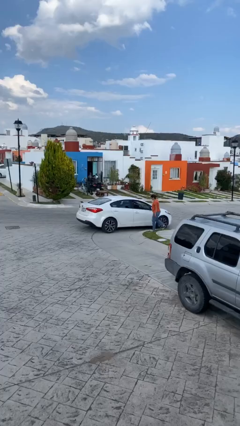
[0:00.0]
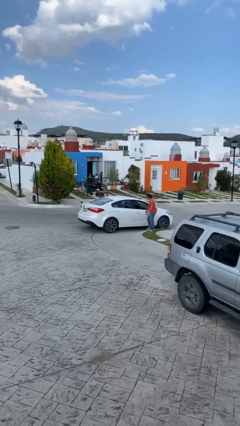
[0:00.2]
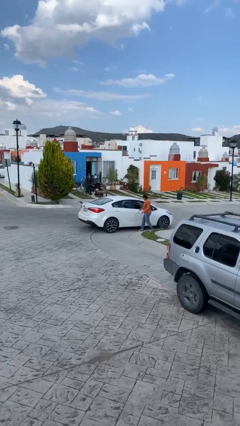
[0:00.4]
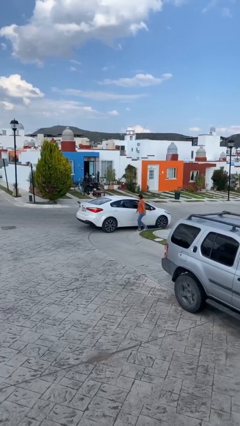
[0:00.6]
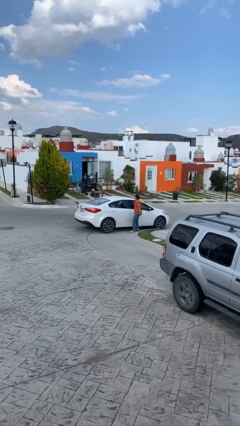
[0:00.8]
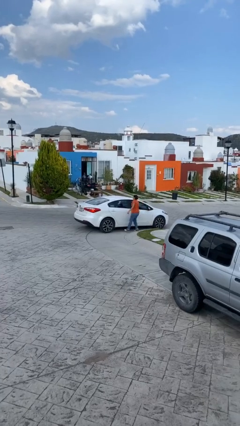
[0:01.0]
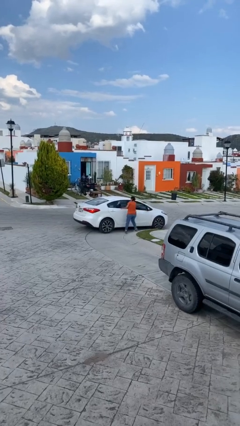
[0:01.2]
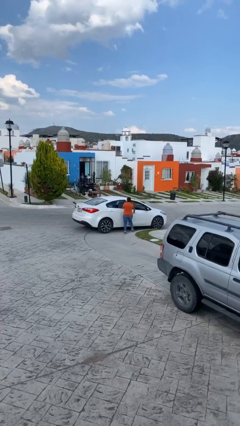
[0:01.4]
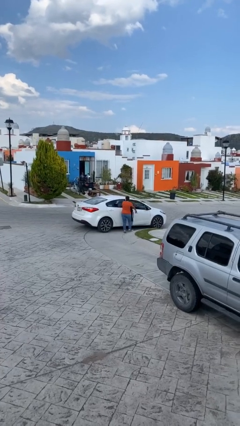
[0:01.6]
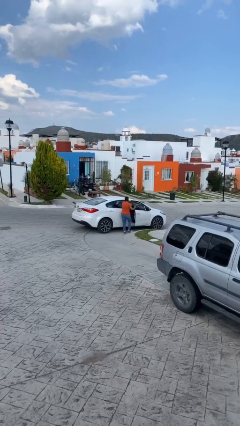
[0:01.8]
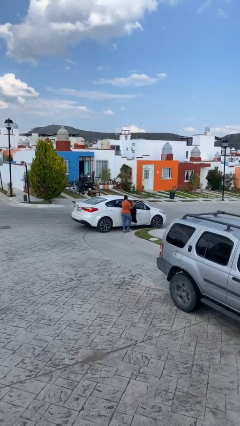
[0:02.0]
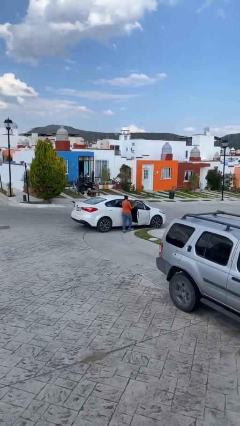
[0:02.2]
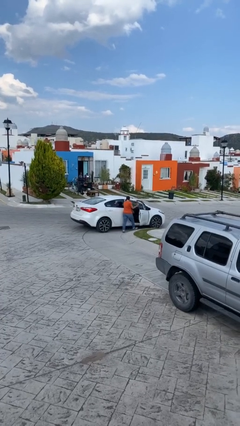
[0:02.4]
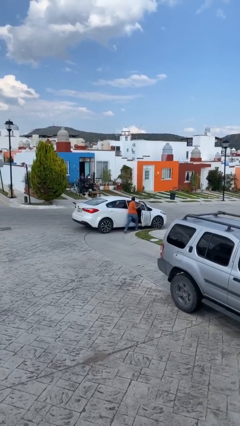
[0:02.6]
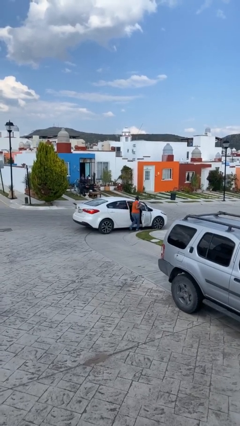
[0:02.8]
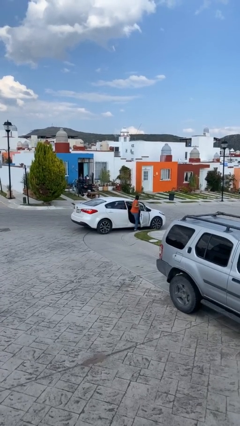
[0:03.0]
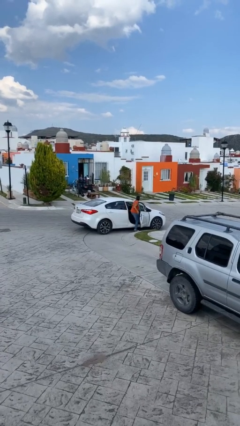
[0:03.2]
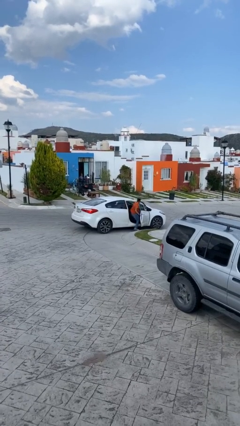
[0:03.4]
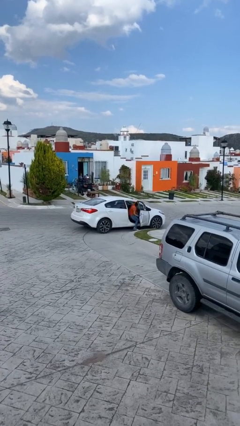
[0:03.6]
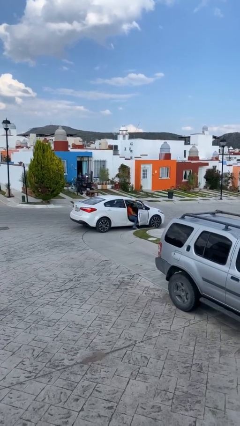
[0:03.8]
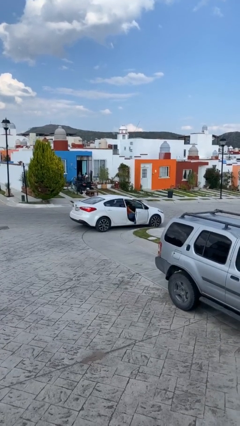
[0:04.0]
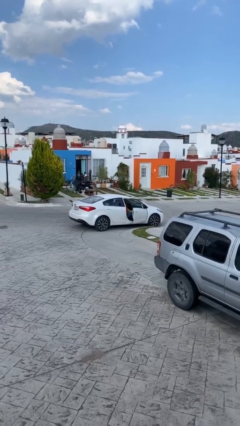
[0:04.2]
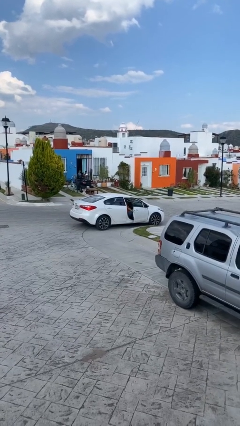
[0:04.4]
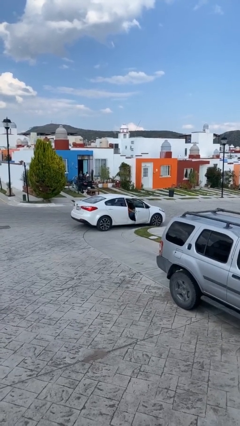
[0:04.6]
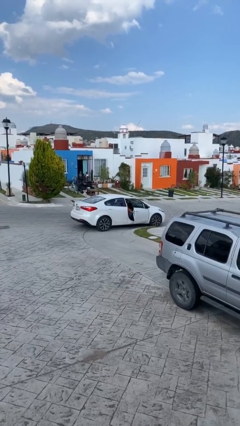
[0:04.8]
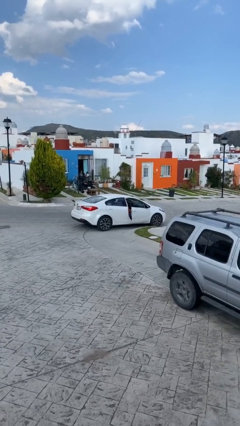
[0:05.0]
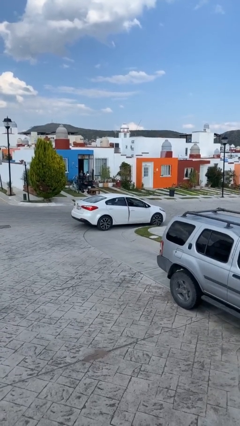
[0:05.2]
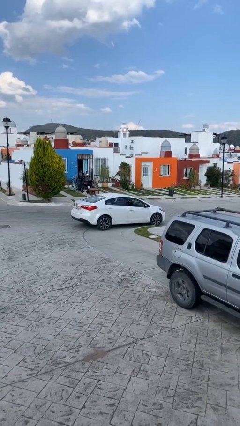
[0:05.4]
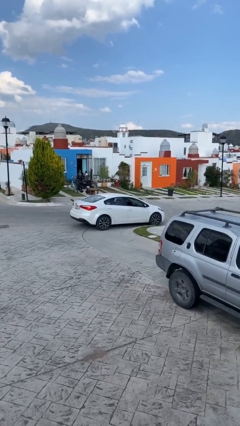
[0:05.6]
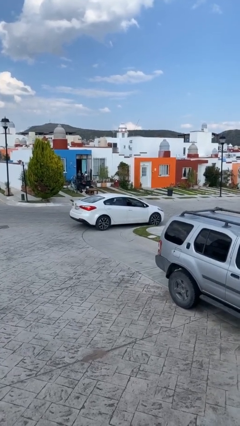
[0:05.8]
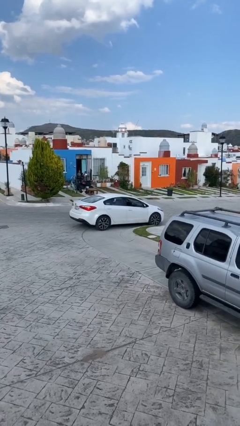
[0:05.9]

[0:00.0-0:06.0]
car picks up person

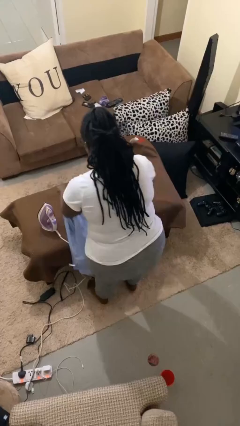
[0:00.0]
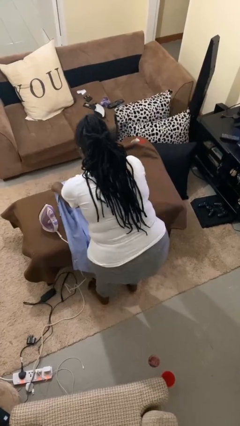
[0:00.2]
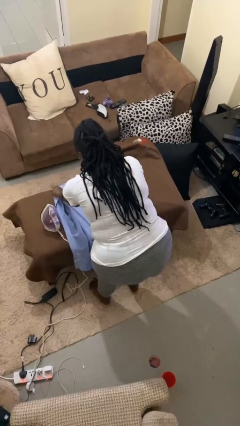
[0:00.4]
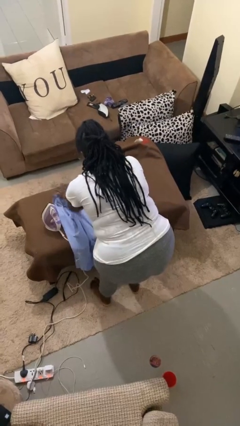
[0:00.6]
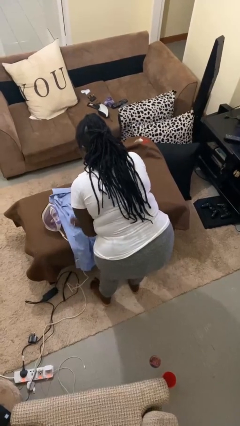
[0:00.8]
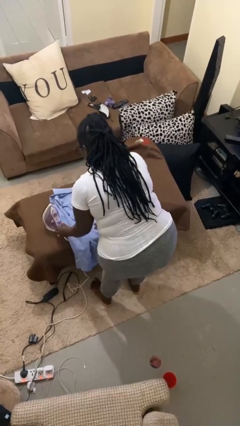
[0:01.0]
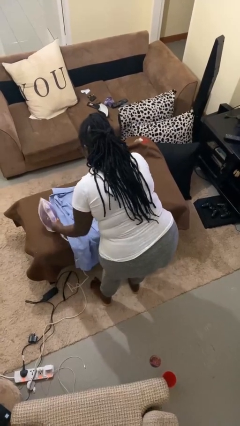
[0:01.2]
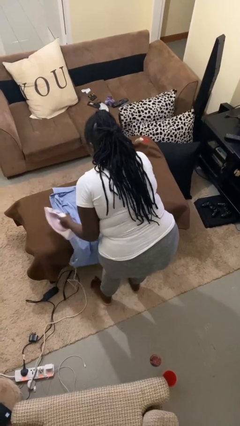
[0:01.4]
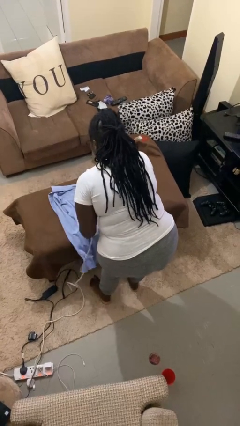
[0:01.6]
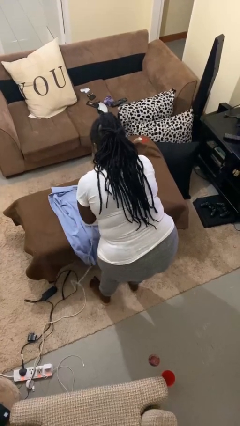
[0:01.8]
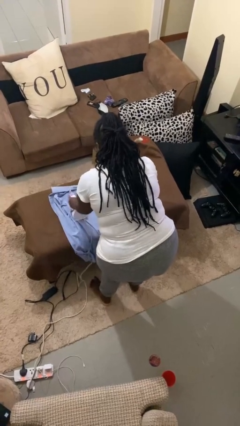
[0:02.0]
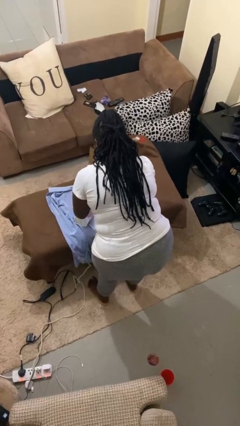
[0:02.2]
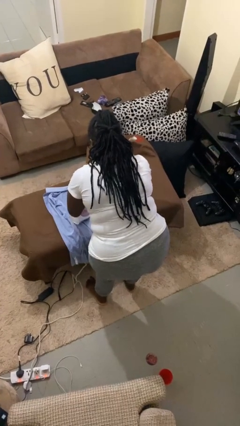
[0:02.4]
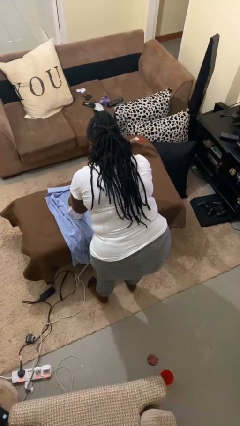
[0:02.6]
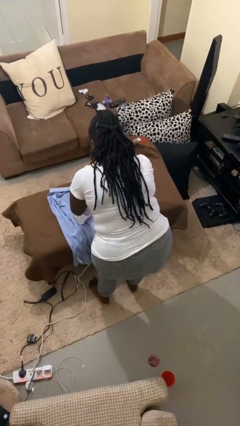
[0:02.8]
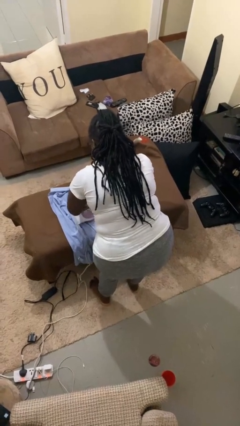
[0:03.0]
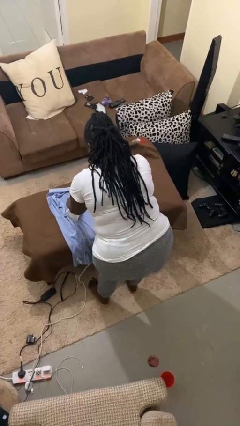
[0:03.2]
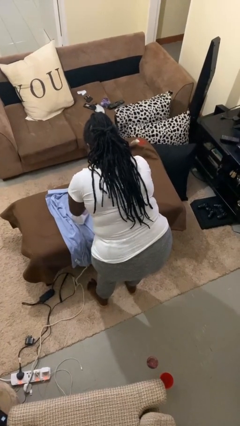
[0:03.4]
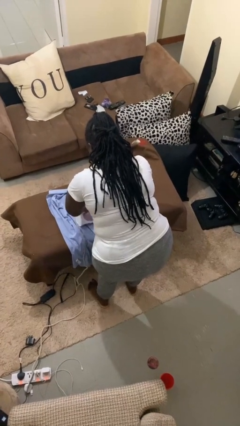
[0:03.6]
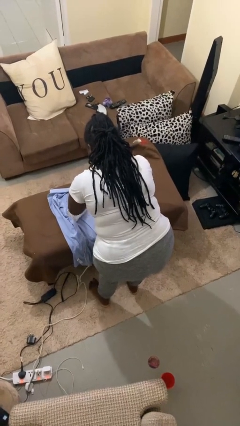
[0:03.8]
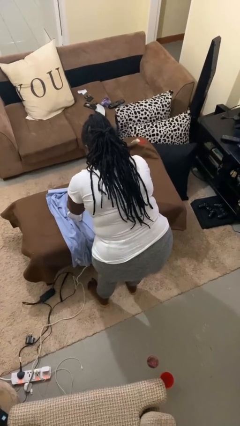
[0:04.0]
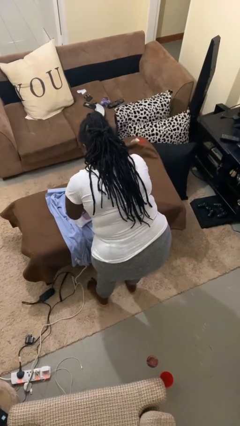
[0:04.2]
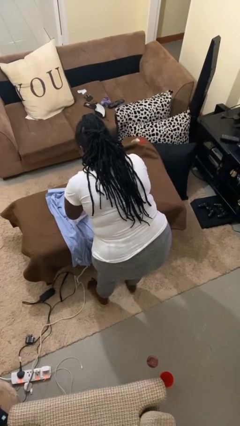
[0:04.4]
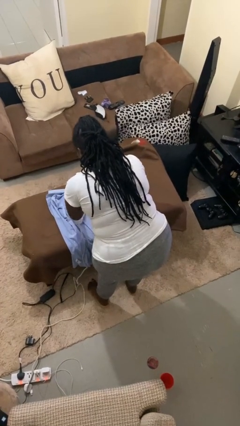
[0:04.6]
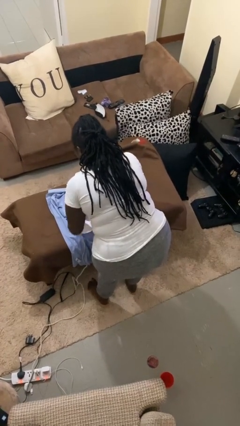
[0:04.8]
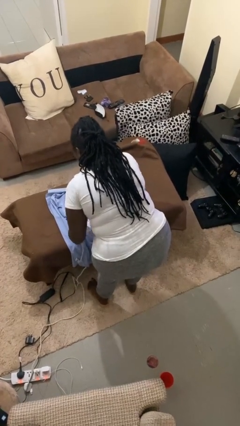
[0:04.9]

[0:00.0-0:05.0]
person irons clothes

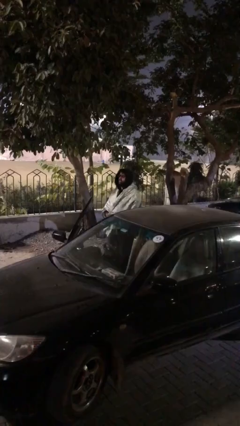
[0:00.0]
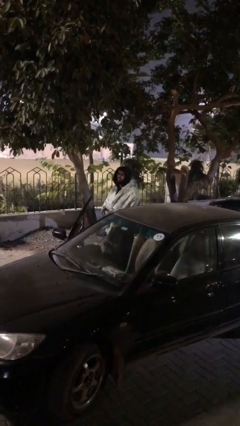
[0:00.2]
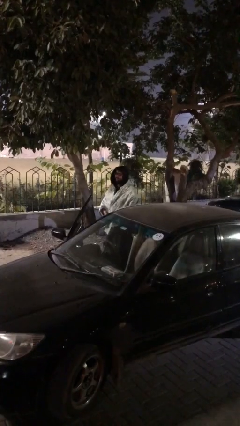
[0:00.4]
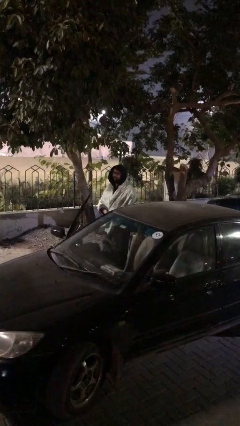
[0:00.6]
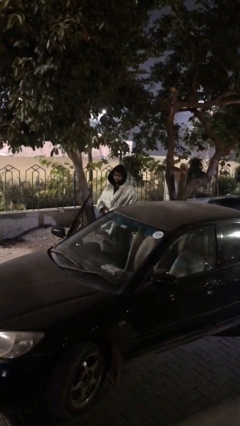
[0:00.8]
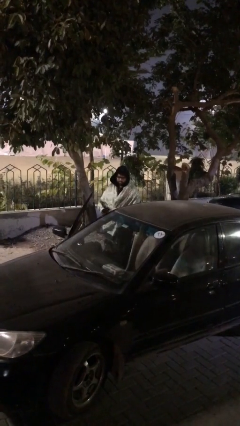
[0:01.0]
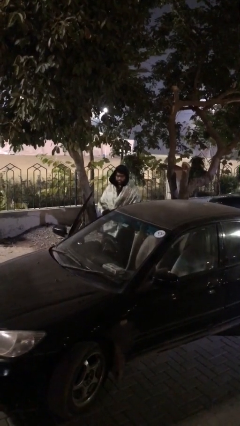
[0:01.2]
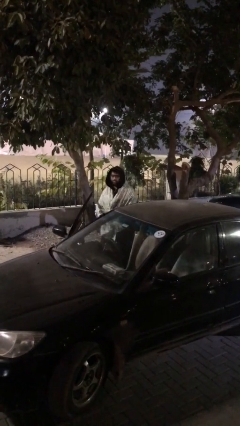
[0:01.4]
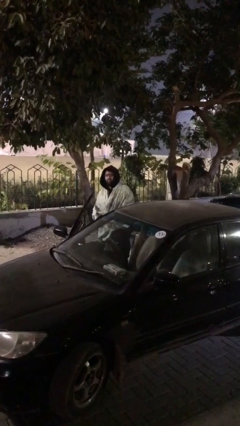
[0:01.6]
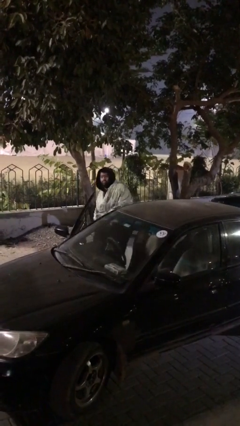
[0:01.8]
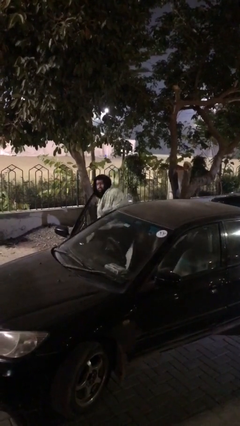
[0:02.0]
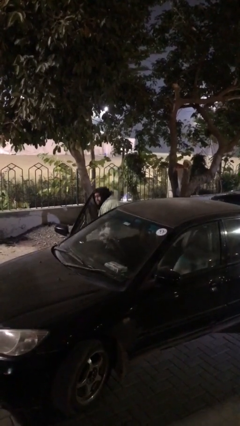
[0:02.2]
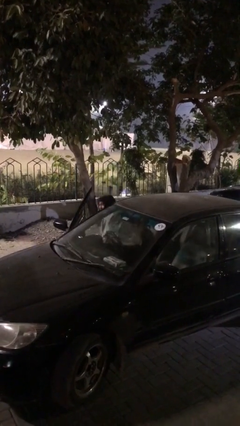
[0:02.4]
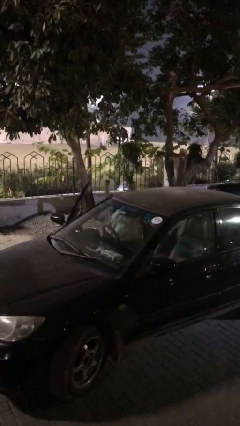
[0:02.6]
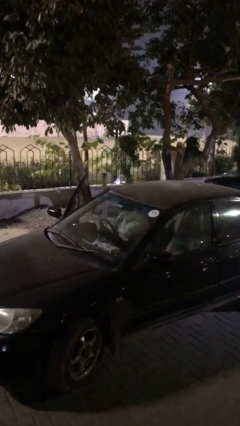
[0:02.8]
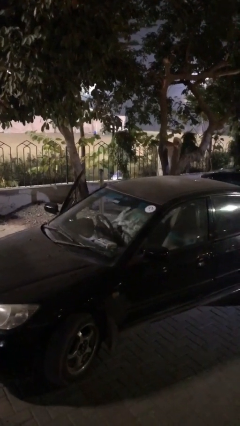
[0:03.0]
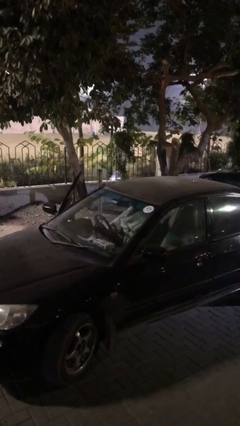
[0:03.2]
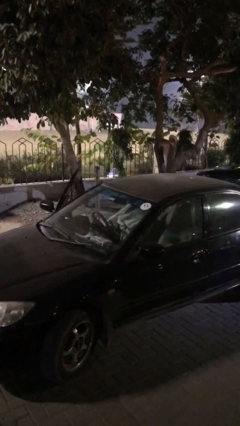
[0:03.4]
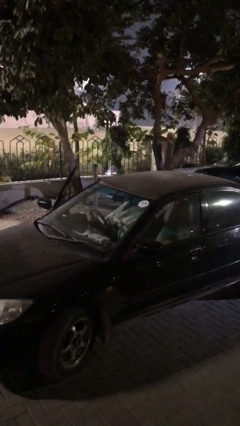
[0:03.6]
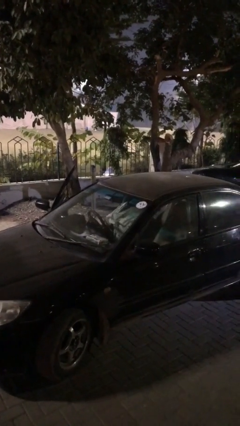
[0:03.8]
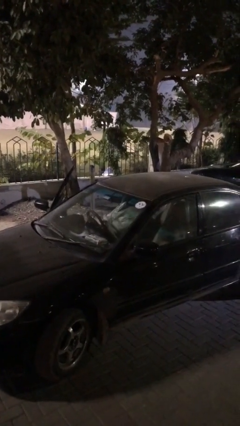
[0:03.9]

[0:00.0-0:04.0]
person enters car

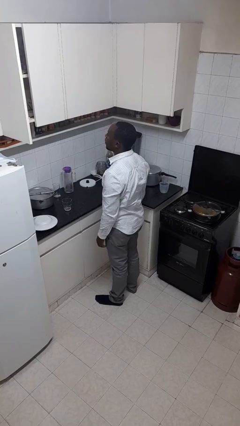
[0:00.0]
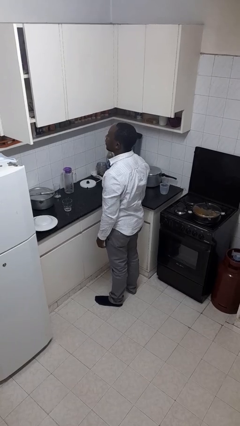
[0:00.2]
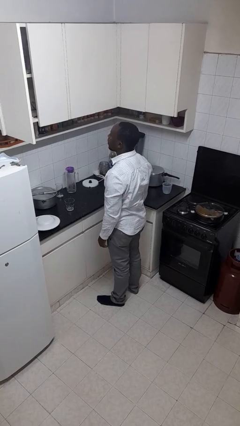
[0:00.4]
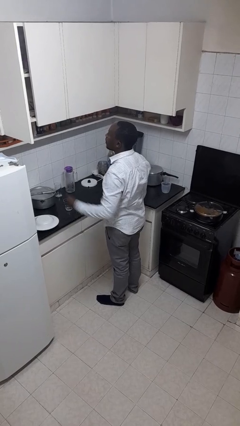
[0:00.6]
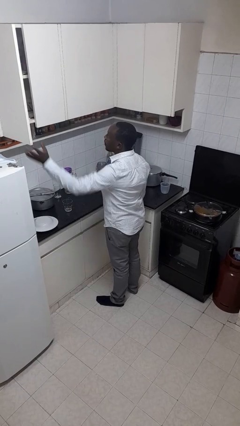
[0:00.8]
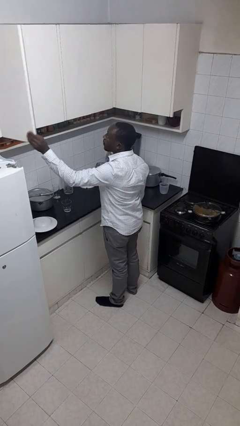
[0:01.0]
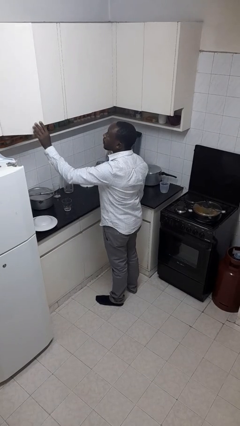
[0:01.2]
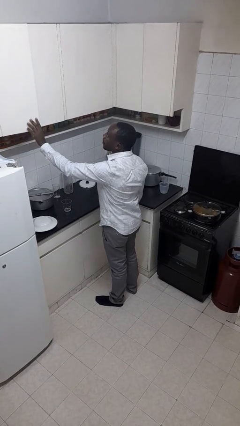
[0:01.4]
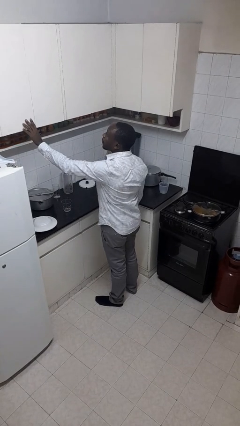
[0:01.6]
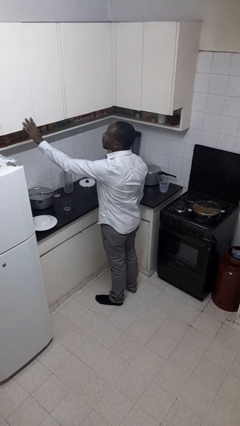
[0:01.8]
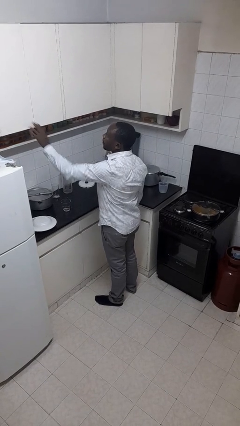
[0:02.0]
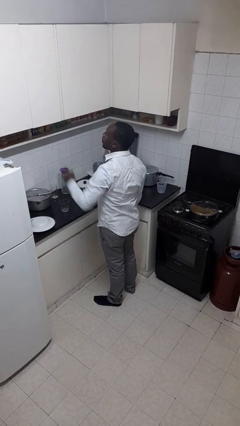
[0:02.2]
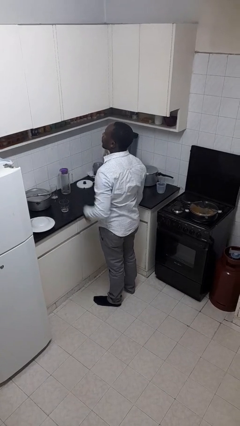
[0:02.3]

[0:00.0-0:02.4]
person closes cabinet

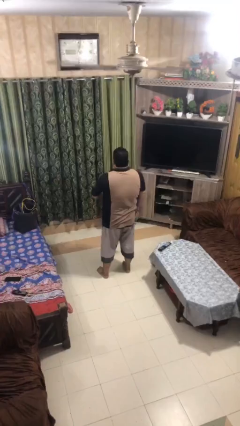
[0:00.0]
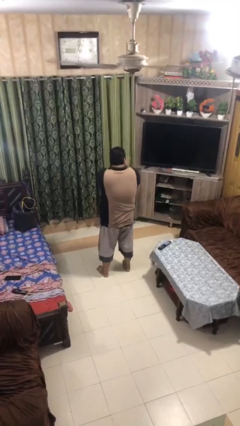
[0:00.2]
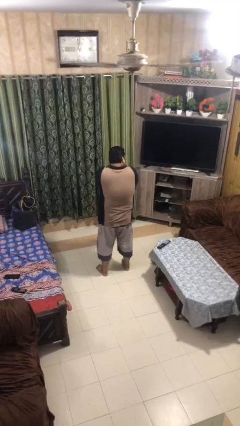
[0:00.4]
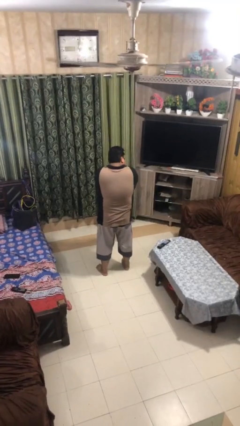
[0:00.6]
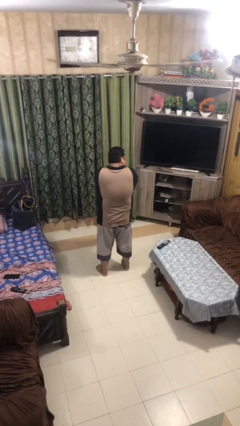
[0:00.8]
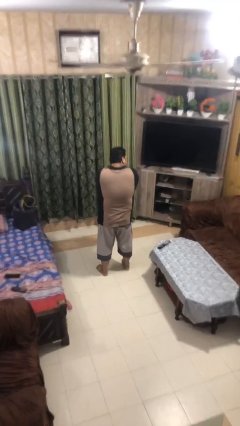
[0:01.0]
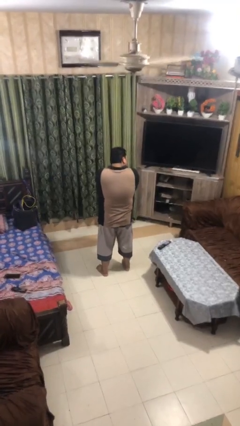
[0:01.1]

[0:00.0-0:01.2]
person swats bug
